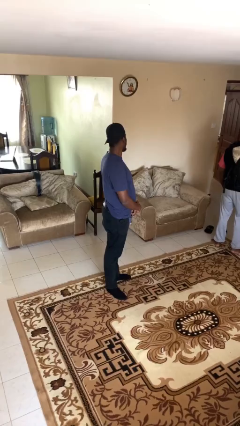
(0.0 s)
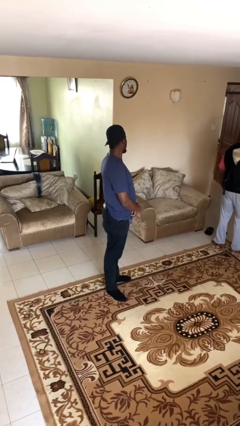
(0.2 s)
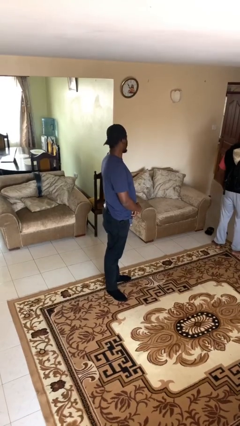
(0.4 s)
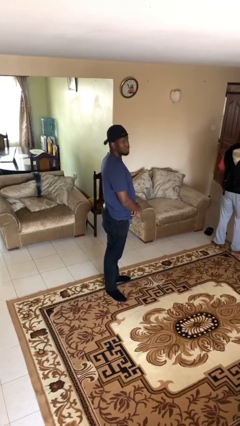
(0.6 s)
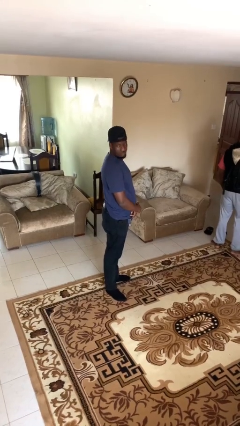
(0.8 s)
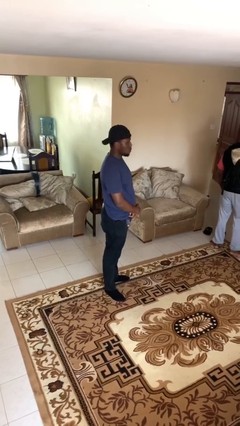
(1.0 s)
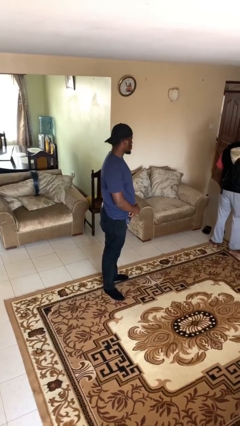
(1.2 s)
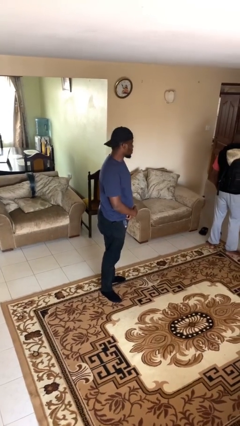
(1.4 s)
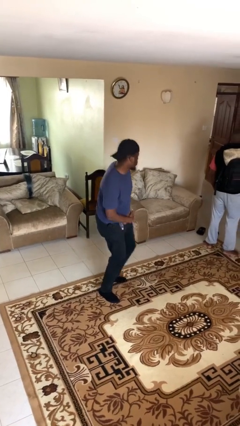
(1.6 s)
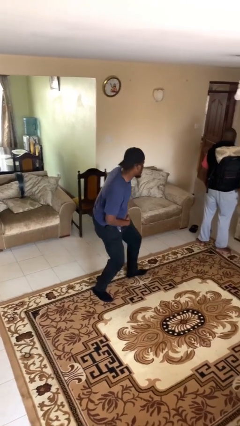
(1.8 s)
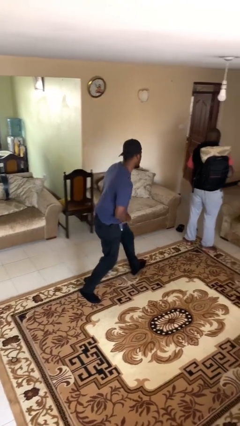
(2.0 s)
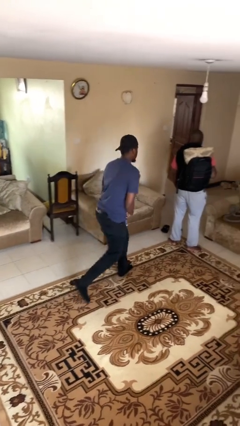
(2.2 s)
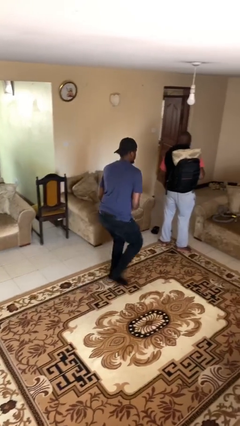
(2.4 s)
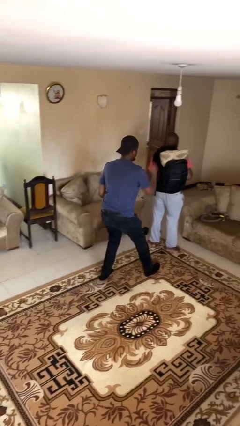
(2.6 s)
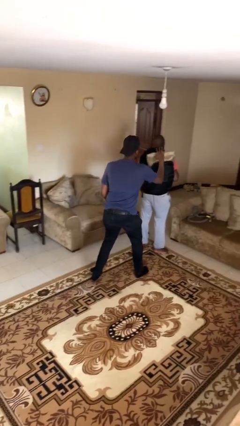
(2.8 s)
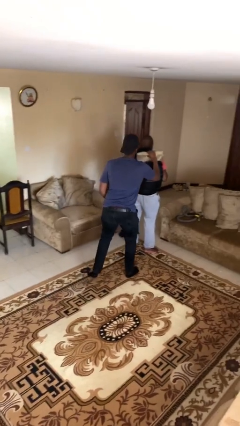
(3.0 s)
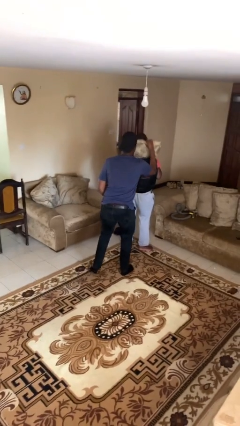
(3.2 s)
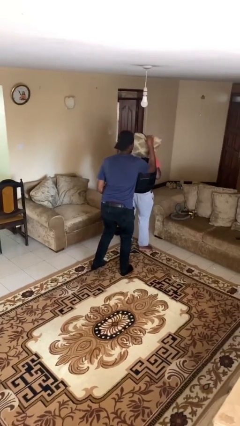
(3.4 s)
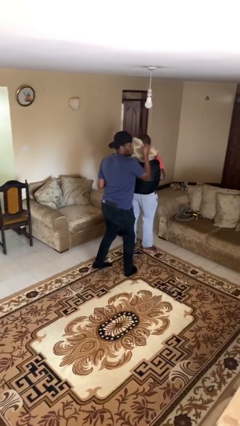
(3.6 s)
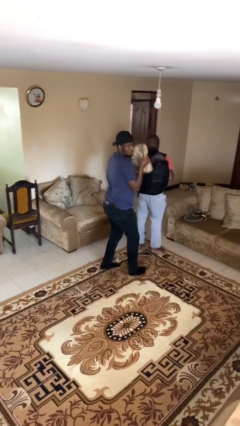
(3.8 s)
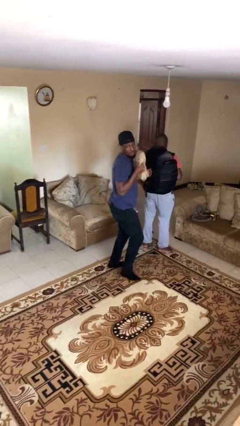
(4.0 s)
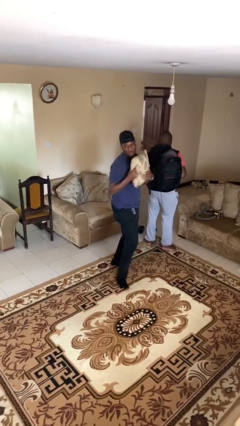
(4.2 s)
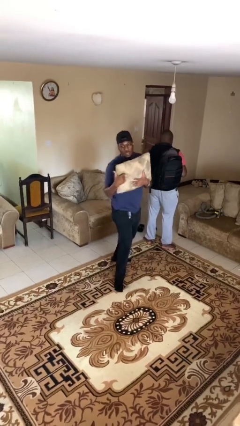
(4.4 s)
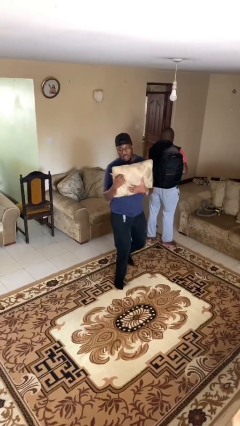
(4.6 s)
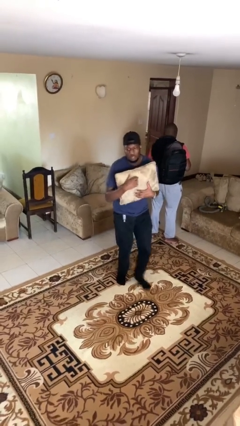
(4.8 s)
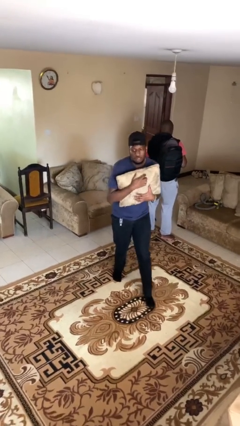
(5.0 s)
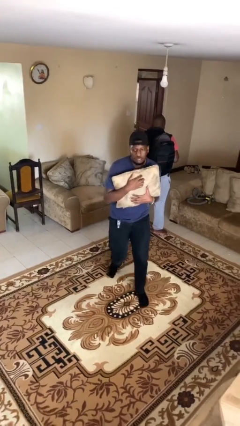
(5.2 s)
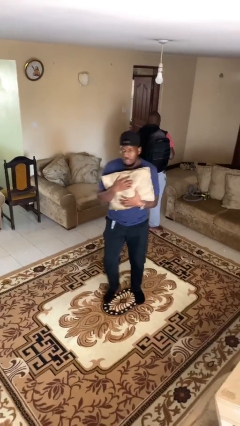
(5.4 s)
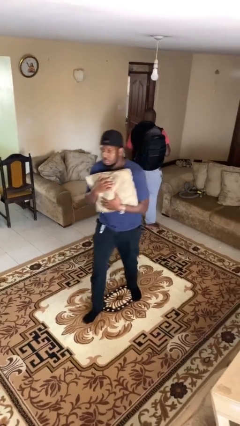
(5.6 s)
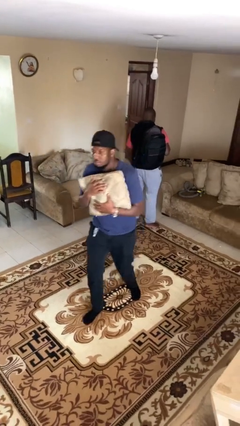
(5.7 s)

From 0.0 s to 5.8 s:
person steals object from person

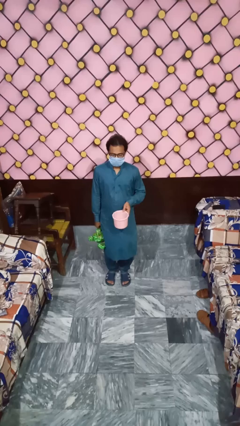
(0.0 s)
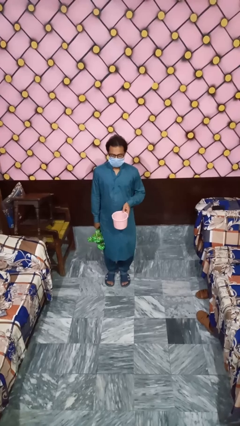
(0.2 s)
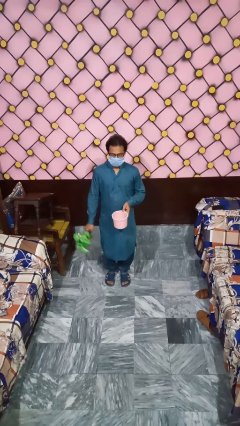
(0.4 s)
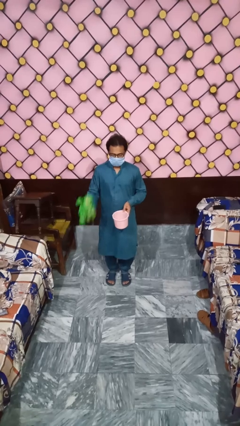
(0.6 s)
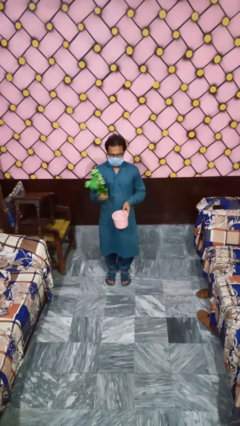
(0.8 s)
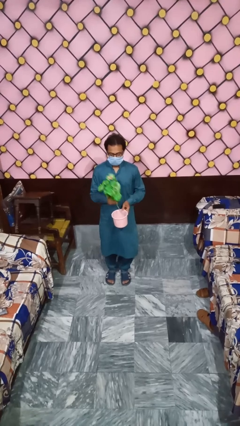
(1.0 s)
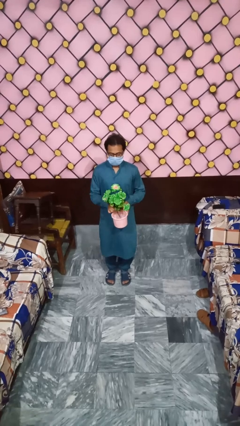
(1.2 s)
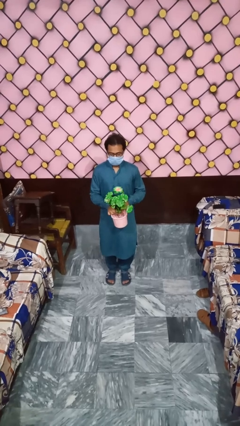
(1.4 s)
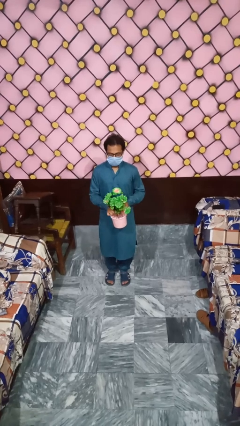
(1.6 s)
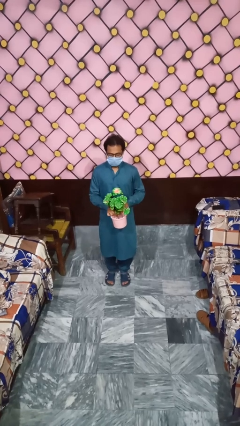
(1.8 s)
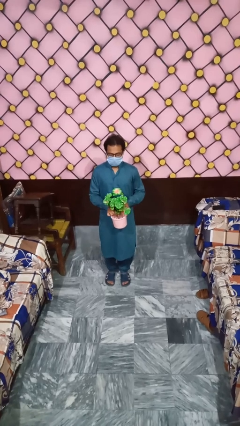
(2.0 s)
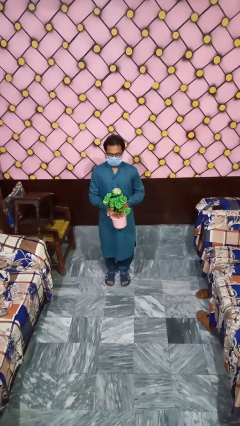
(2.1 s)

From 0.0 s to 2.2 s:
person arranges flowers in vase

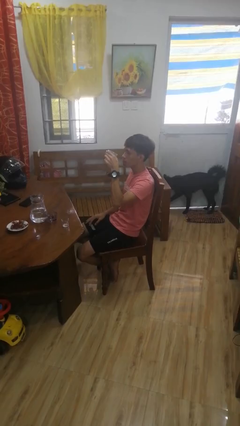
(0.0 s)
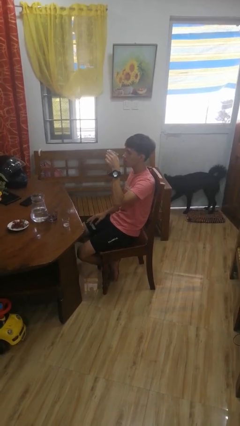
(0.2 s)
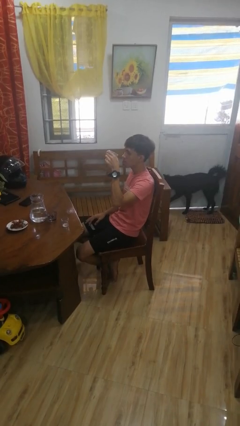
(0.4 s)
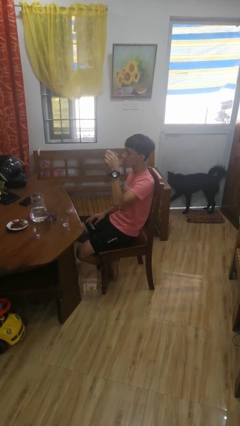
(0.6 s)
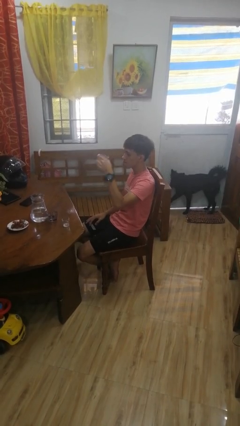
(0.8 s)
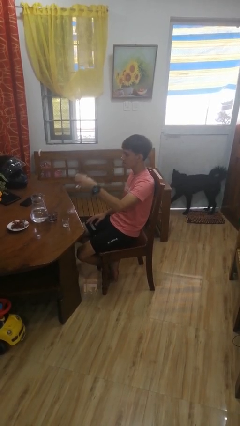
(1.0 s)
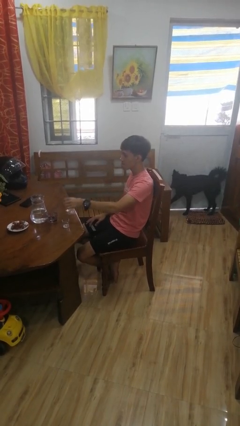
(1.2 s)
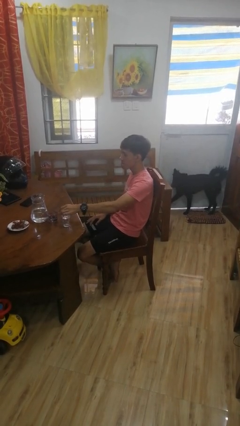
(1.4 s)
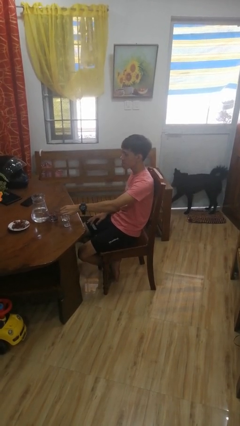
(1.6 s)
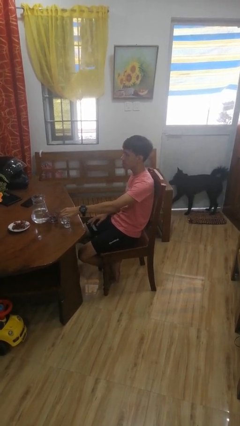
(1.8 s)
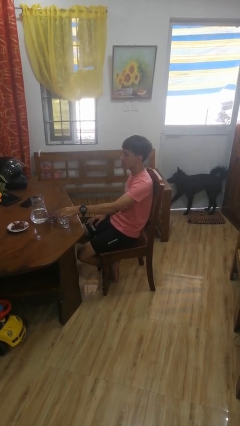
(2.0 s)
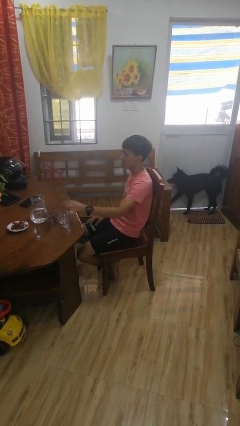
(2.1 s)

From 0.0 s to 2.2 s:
person puts down object on table

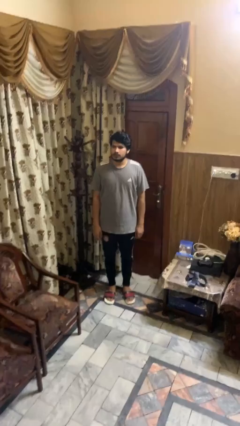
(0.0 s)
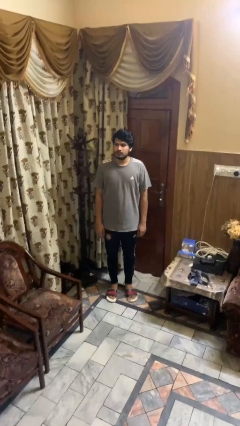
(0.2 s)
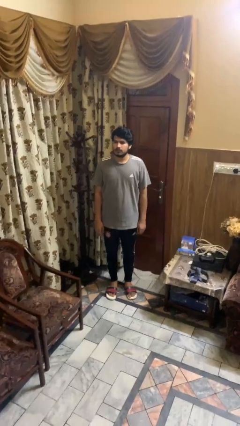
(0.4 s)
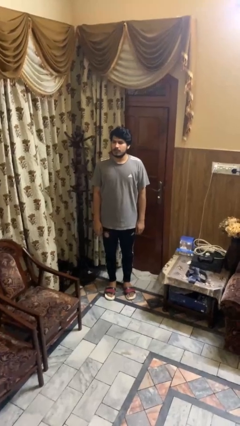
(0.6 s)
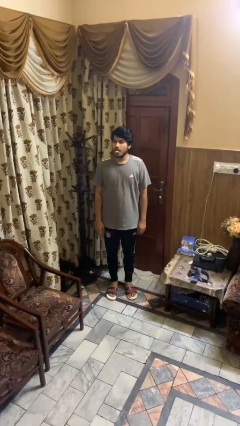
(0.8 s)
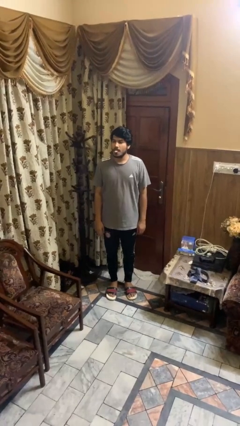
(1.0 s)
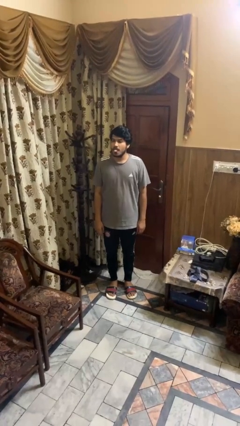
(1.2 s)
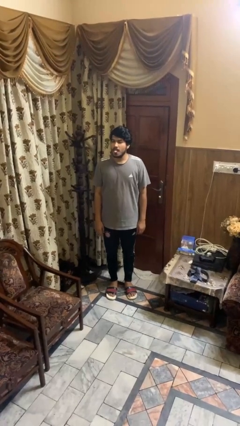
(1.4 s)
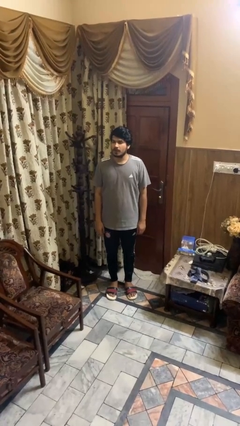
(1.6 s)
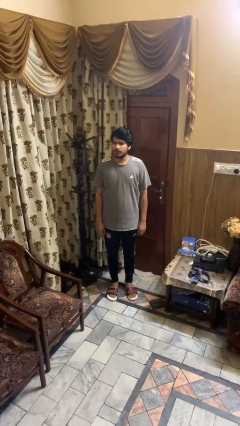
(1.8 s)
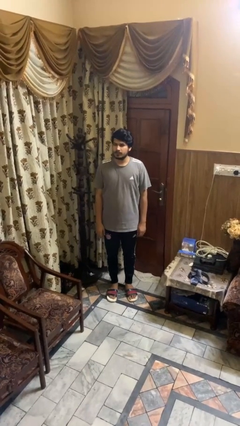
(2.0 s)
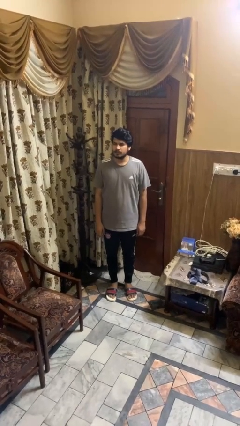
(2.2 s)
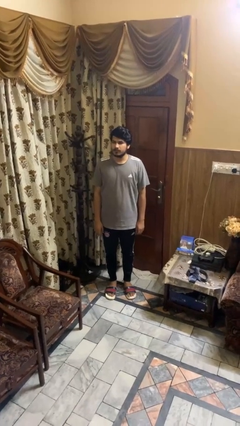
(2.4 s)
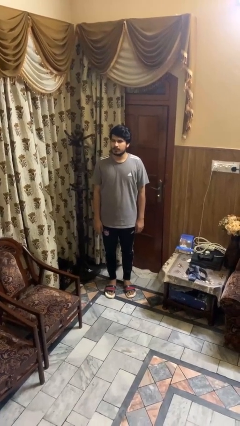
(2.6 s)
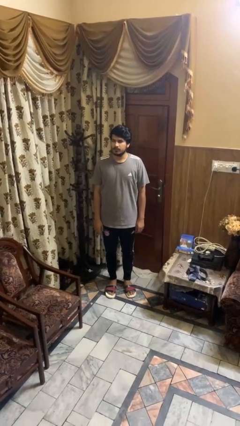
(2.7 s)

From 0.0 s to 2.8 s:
person sticks out tongue

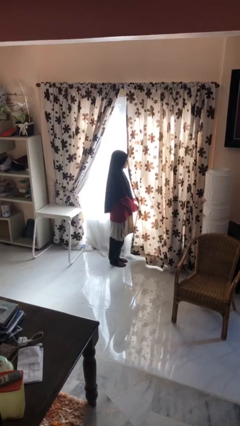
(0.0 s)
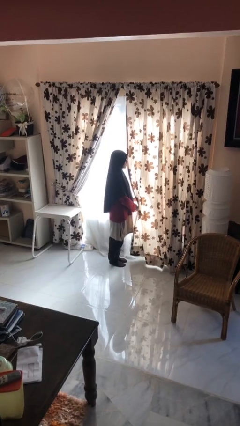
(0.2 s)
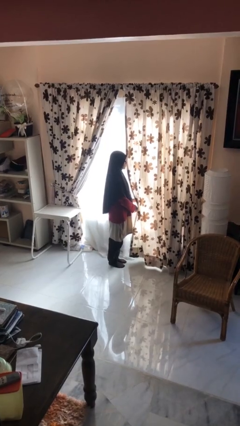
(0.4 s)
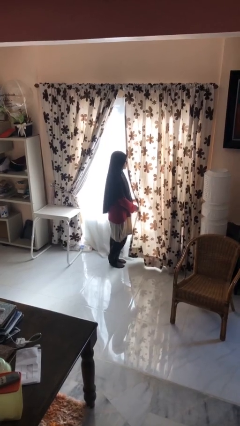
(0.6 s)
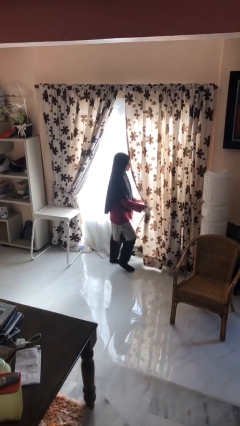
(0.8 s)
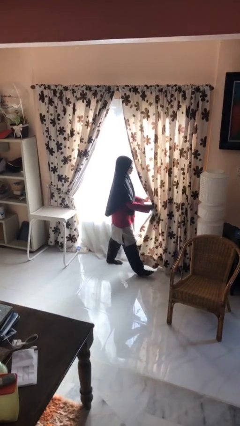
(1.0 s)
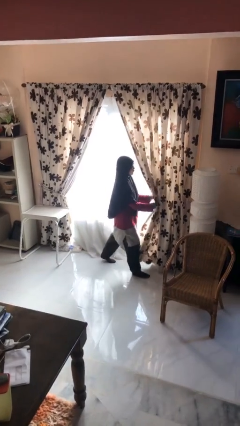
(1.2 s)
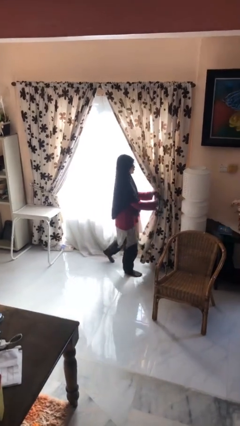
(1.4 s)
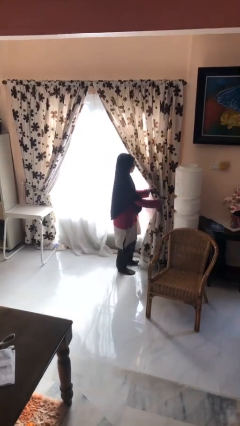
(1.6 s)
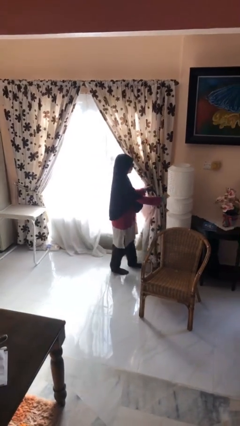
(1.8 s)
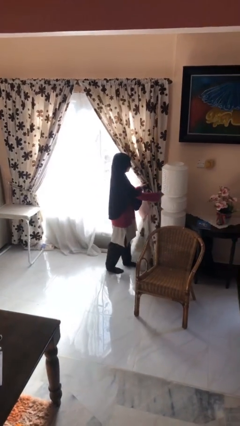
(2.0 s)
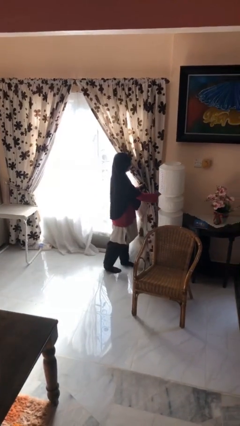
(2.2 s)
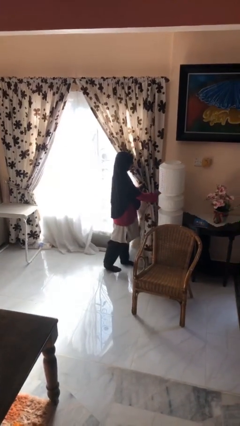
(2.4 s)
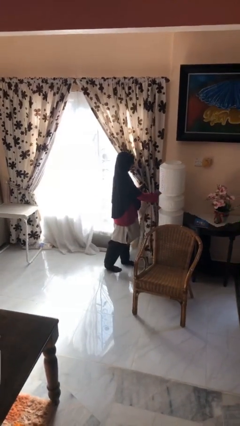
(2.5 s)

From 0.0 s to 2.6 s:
person opens curtains

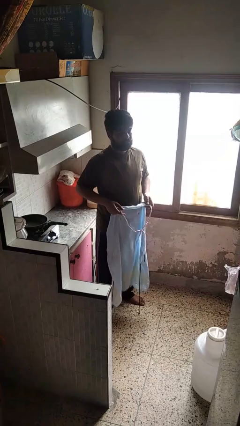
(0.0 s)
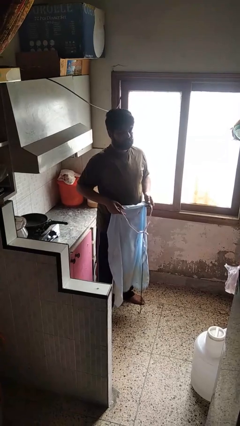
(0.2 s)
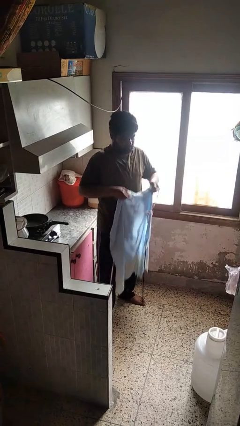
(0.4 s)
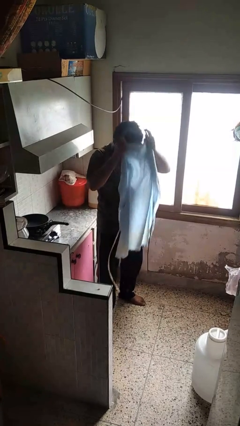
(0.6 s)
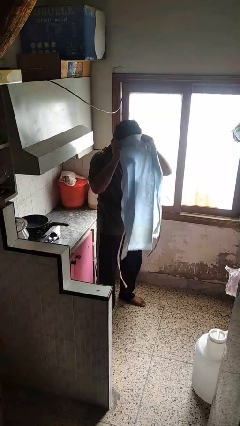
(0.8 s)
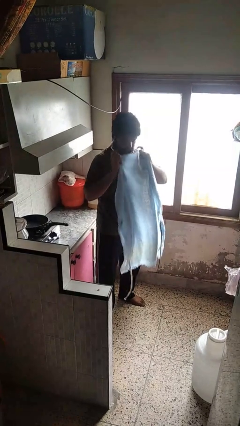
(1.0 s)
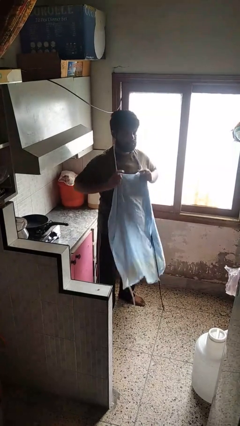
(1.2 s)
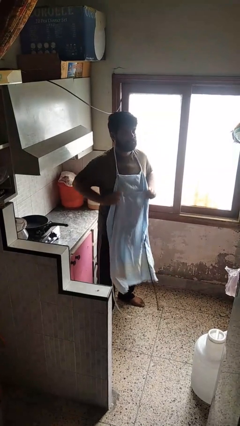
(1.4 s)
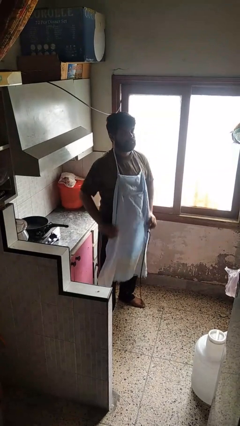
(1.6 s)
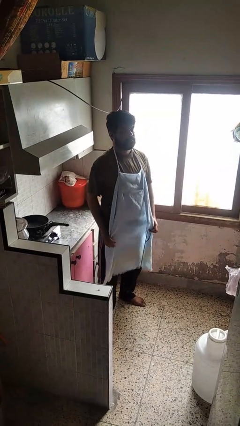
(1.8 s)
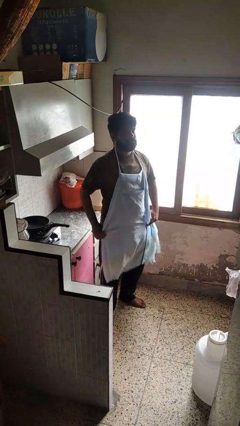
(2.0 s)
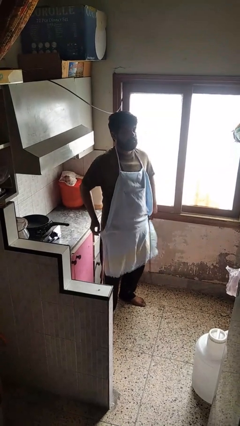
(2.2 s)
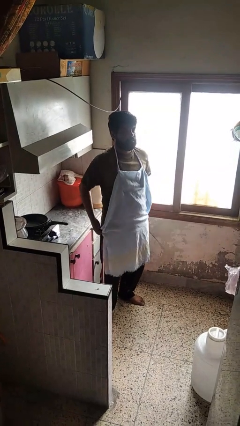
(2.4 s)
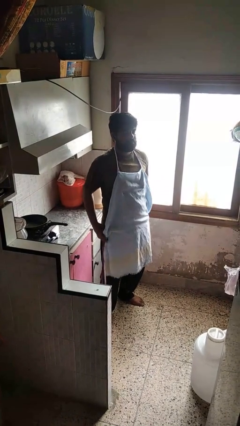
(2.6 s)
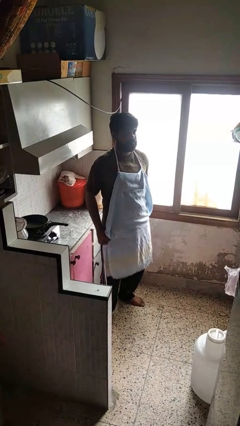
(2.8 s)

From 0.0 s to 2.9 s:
person puts on apron
